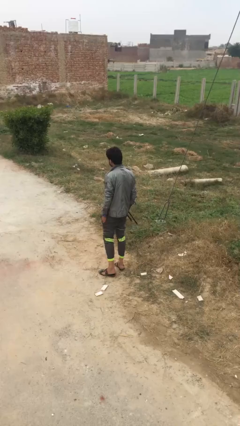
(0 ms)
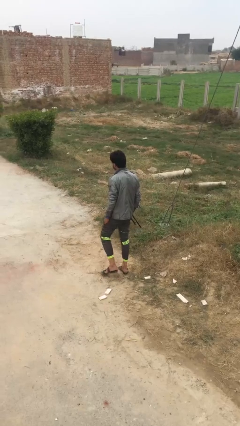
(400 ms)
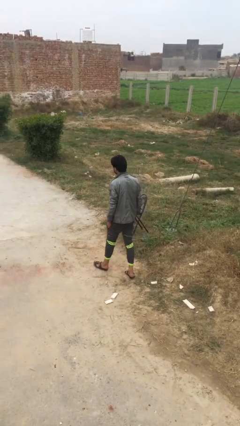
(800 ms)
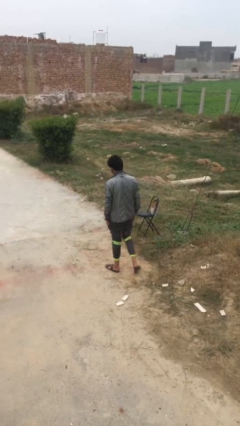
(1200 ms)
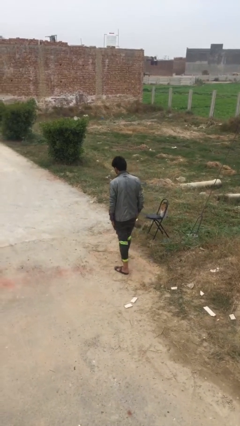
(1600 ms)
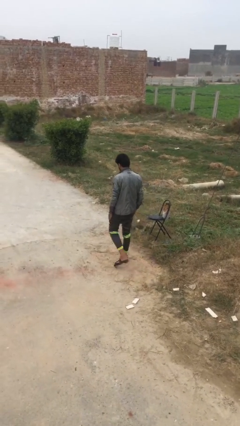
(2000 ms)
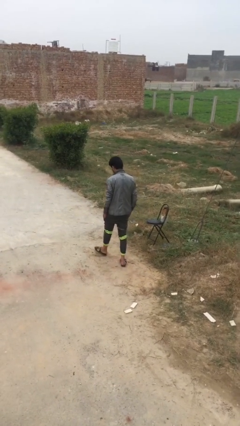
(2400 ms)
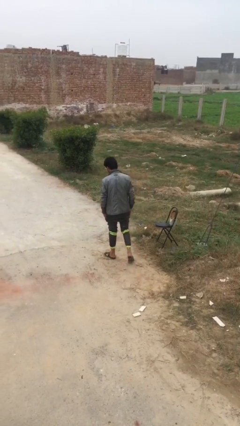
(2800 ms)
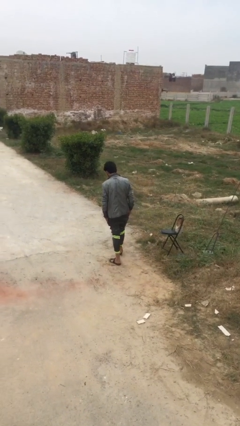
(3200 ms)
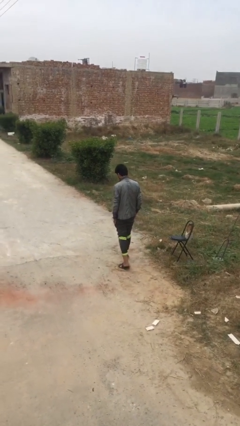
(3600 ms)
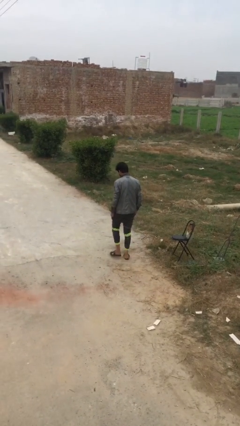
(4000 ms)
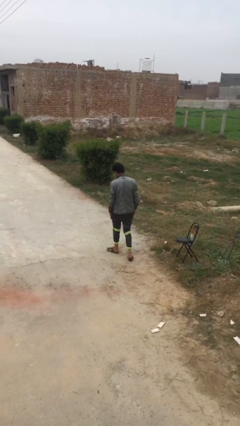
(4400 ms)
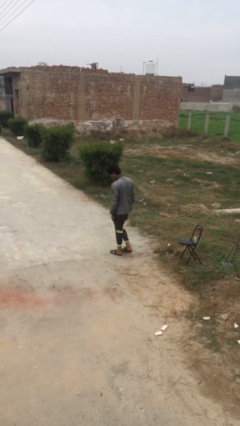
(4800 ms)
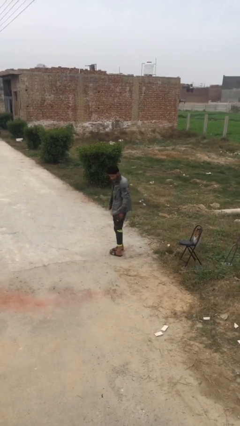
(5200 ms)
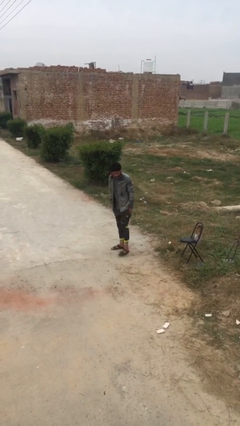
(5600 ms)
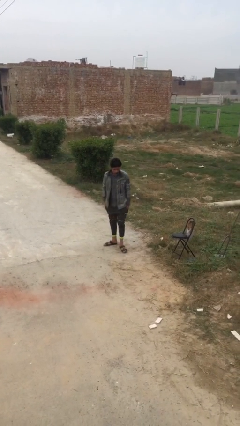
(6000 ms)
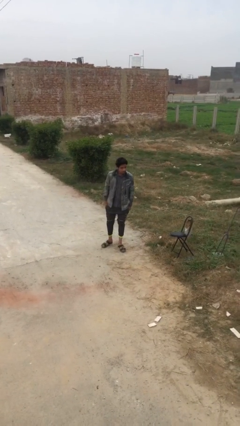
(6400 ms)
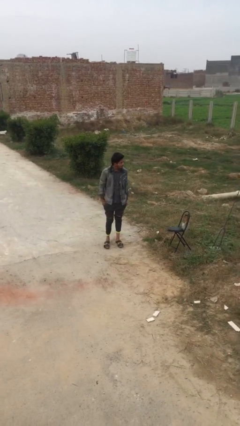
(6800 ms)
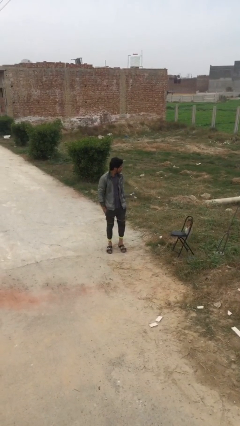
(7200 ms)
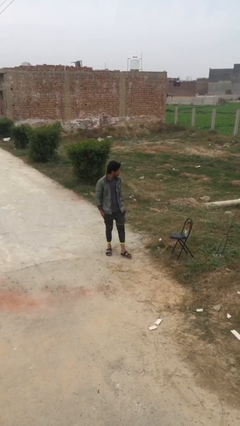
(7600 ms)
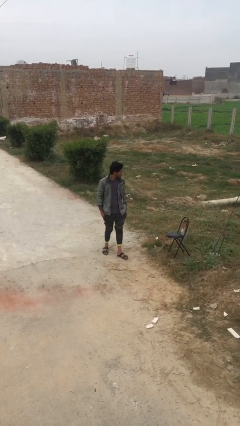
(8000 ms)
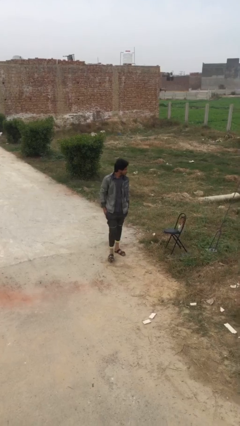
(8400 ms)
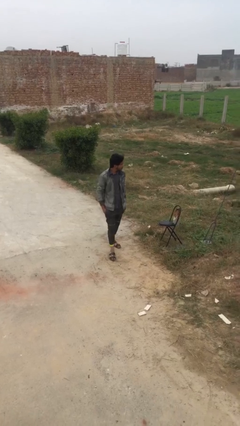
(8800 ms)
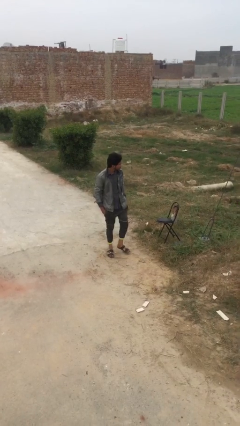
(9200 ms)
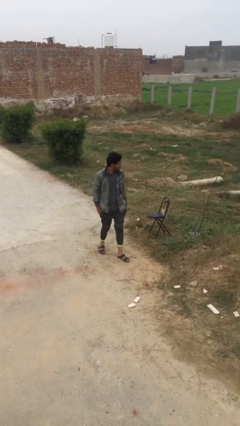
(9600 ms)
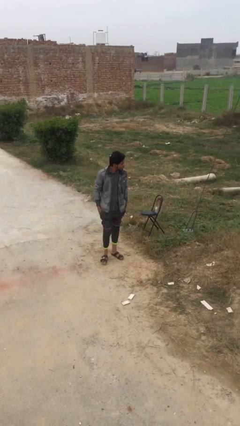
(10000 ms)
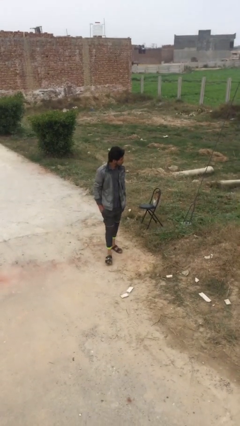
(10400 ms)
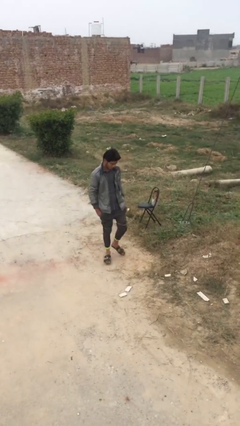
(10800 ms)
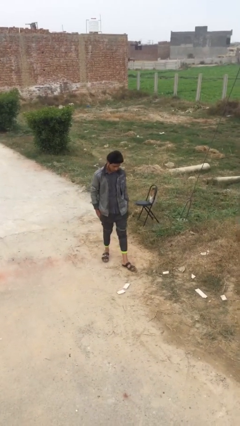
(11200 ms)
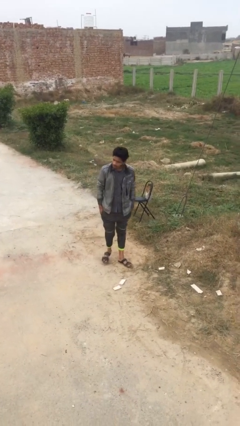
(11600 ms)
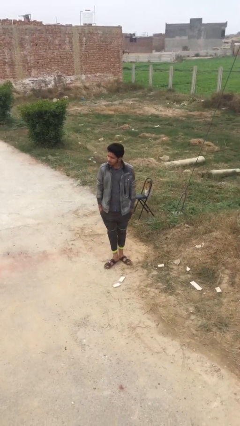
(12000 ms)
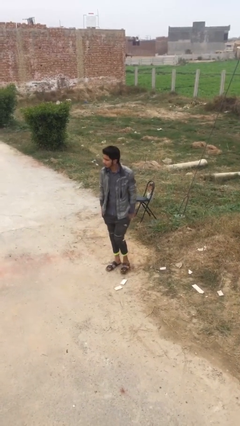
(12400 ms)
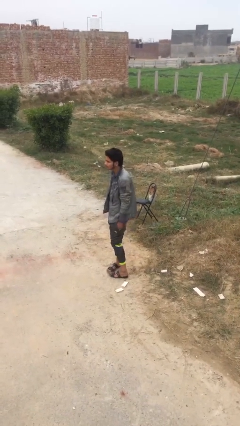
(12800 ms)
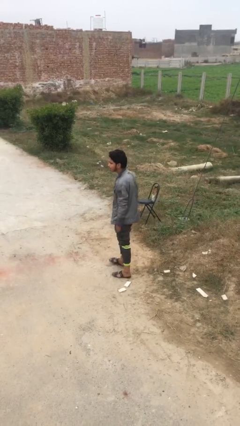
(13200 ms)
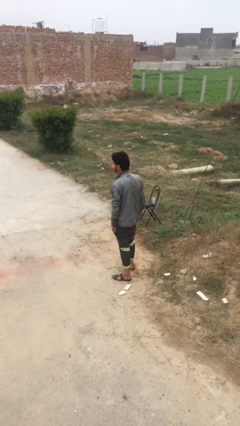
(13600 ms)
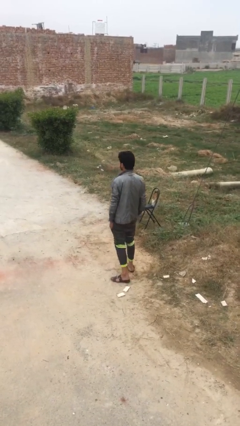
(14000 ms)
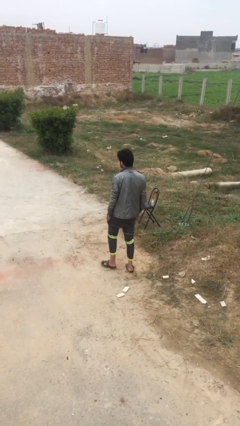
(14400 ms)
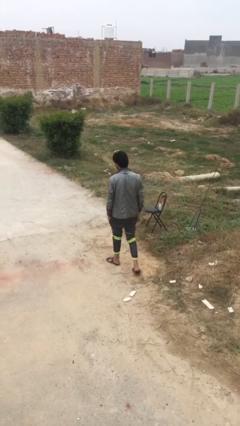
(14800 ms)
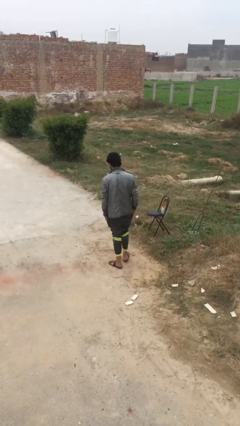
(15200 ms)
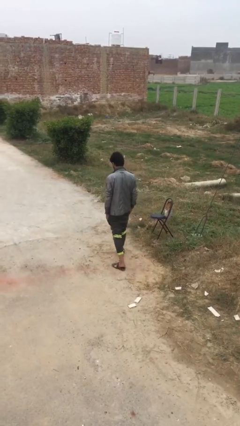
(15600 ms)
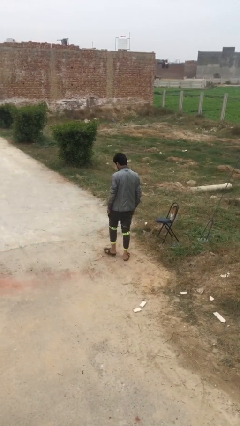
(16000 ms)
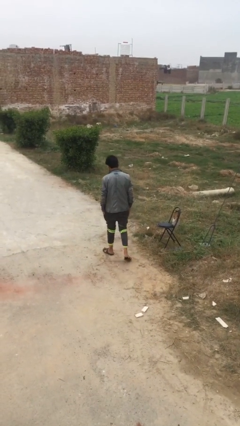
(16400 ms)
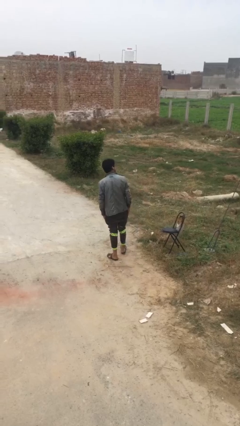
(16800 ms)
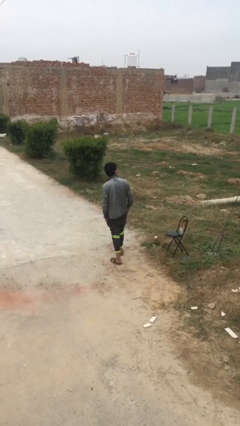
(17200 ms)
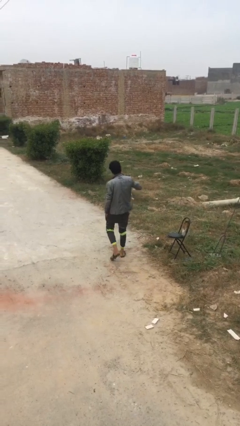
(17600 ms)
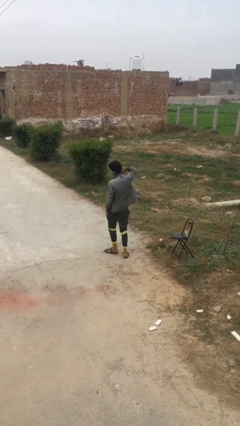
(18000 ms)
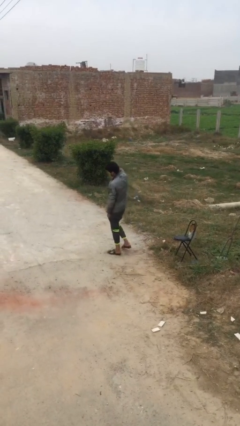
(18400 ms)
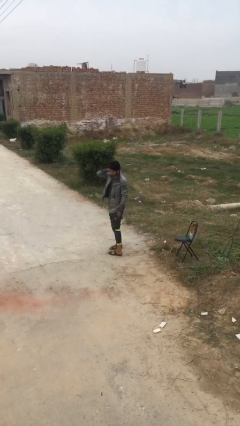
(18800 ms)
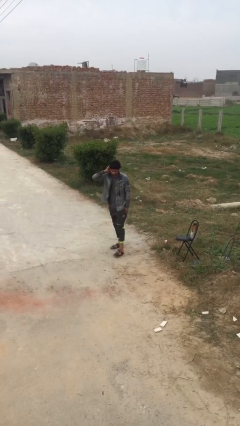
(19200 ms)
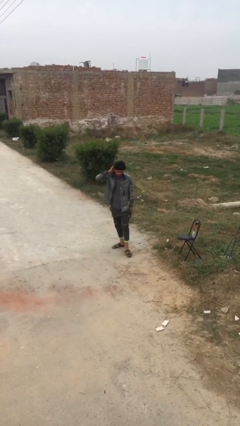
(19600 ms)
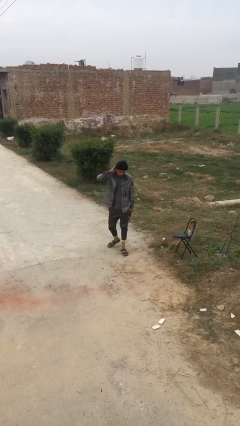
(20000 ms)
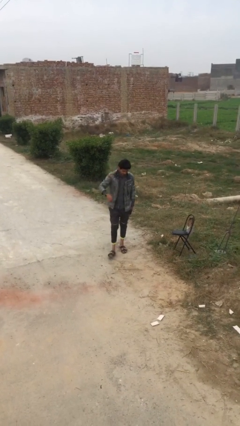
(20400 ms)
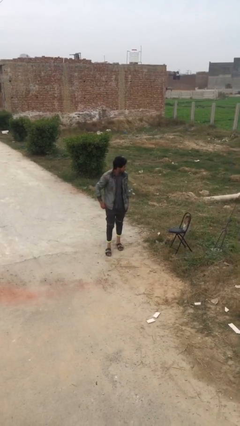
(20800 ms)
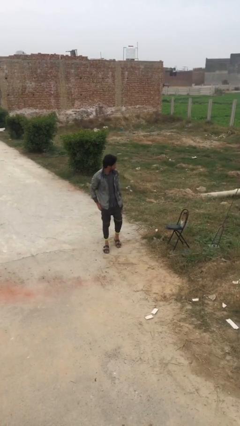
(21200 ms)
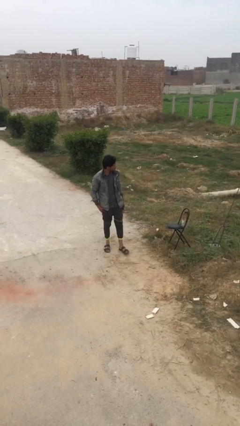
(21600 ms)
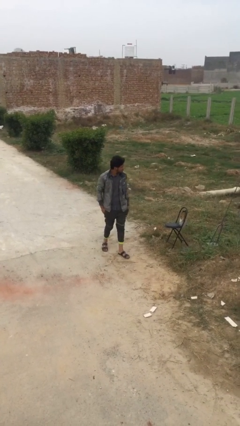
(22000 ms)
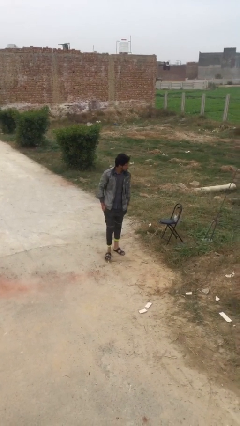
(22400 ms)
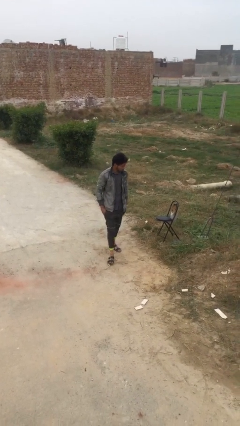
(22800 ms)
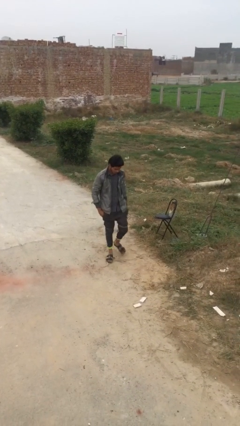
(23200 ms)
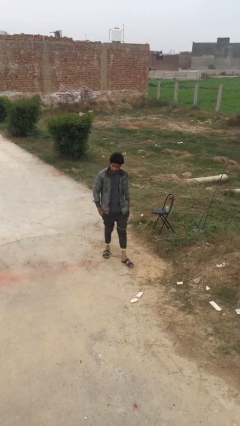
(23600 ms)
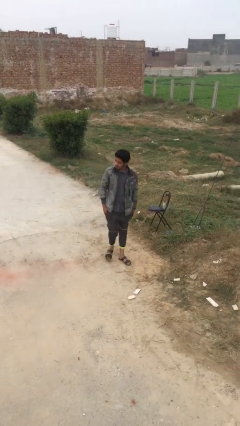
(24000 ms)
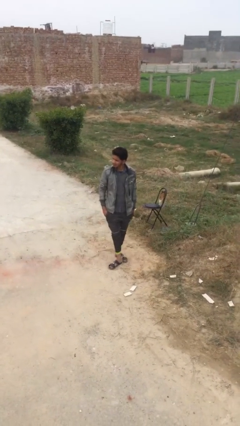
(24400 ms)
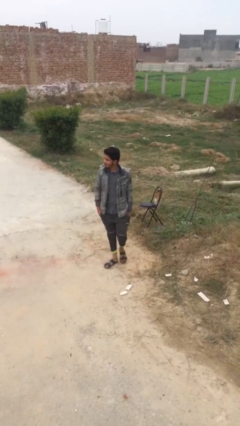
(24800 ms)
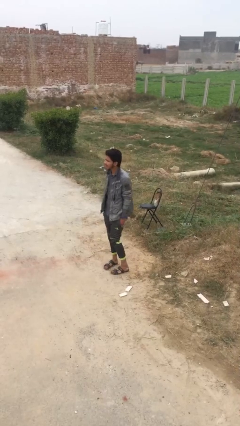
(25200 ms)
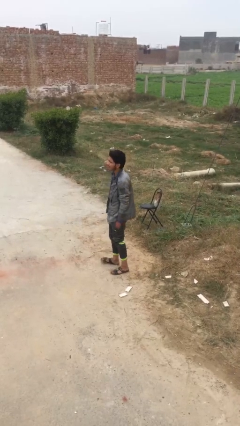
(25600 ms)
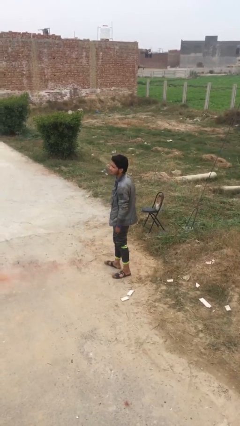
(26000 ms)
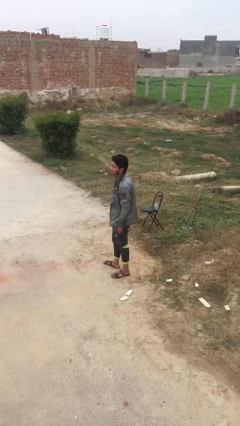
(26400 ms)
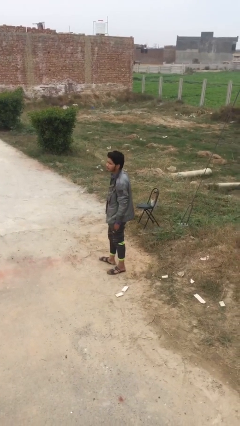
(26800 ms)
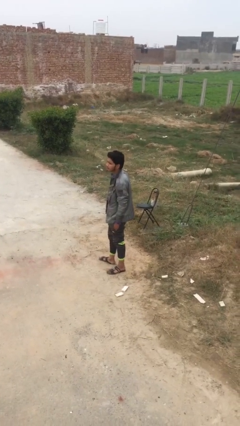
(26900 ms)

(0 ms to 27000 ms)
person walks

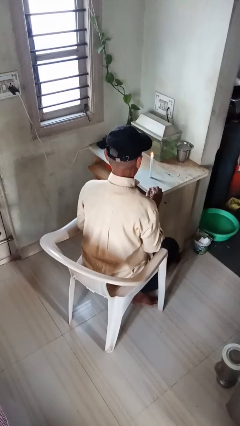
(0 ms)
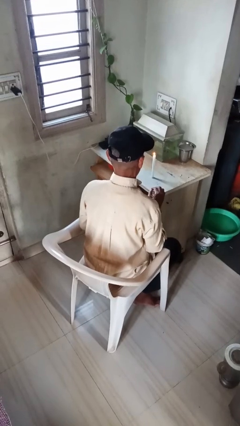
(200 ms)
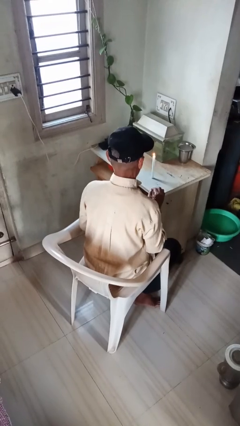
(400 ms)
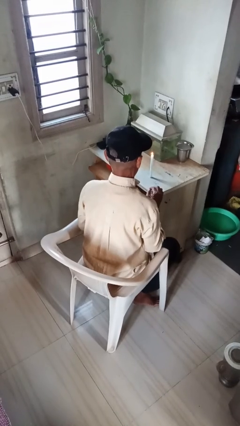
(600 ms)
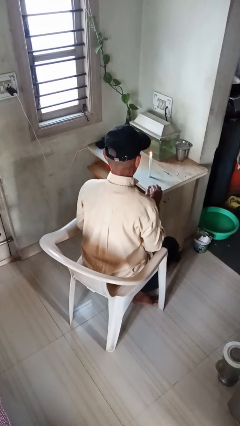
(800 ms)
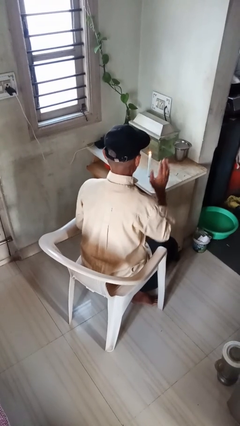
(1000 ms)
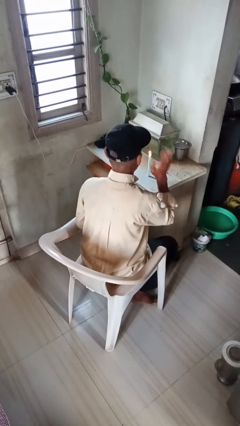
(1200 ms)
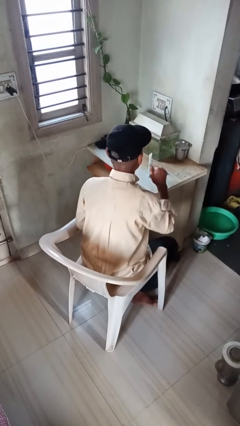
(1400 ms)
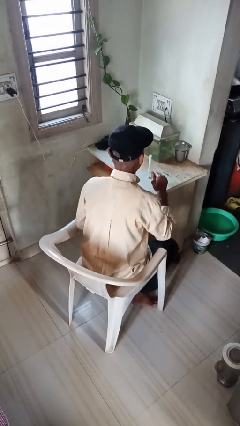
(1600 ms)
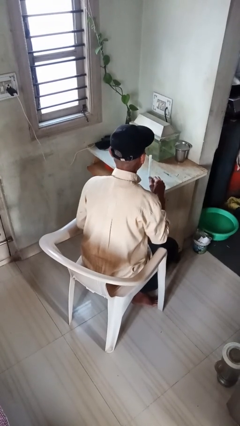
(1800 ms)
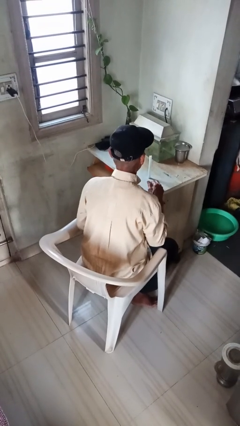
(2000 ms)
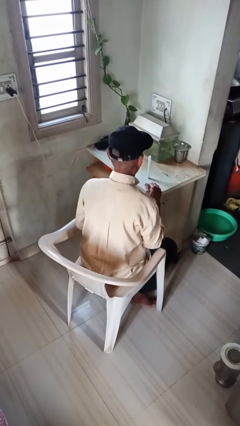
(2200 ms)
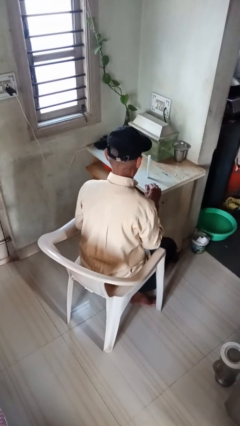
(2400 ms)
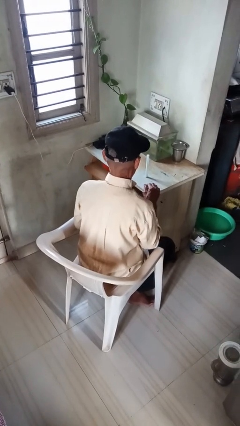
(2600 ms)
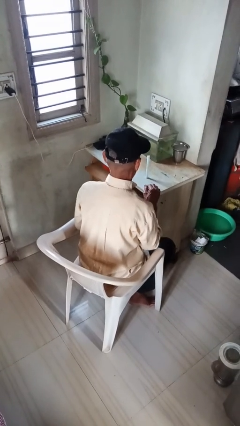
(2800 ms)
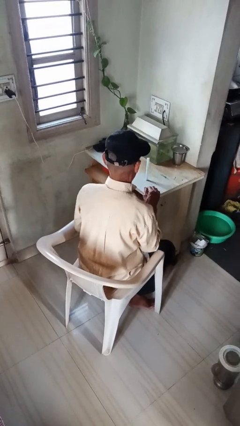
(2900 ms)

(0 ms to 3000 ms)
person extinguishes candle

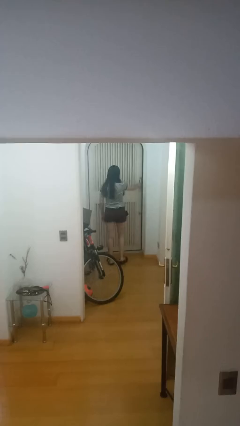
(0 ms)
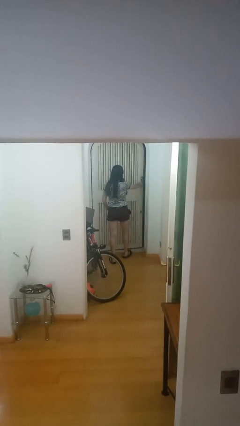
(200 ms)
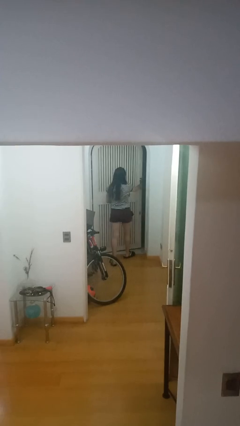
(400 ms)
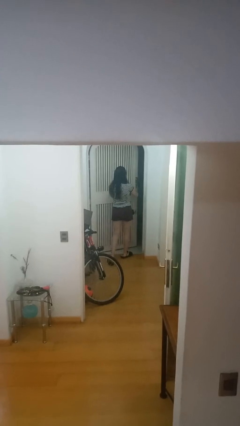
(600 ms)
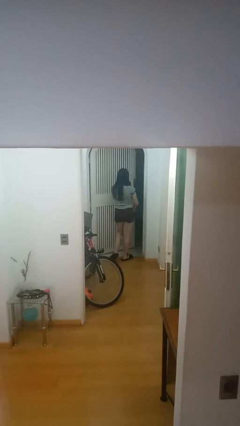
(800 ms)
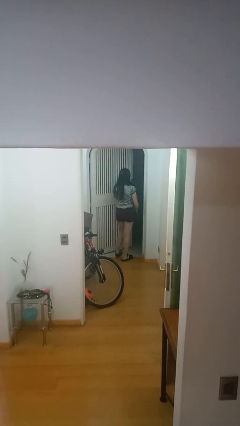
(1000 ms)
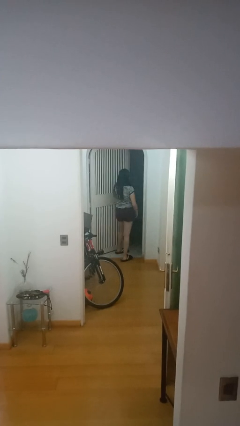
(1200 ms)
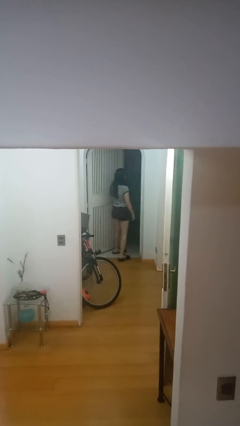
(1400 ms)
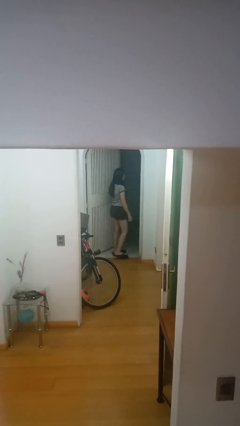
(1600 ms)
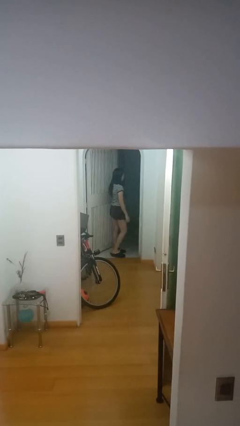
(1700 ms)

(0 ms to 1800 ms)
person opens facility door
